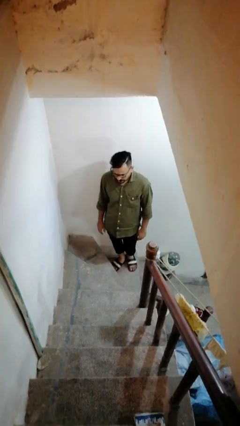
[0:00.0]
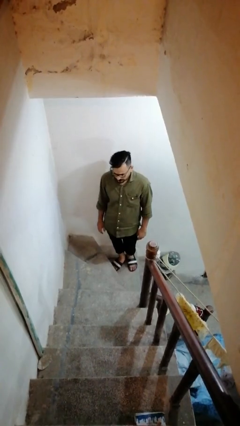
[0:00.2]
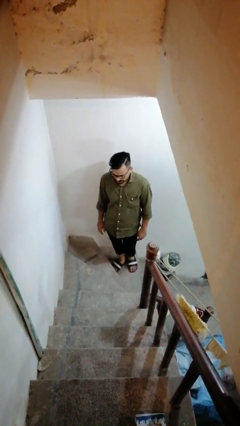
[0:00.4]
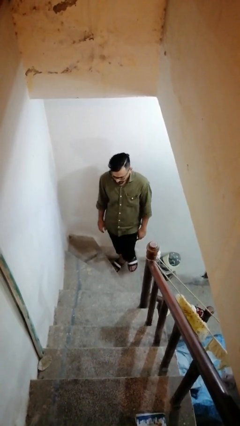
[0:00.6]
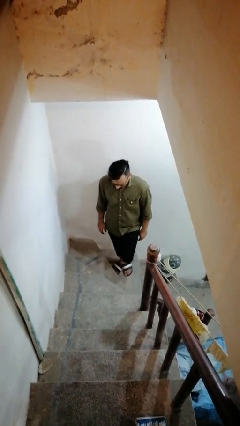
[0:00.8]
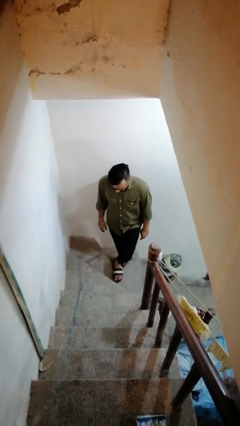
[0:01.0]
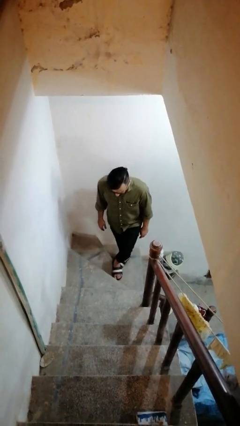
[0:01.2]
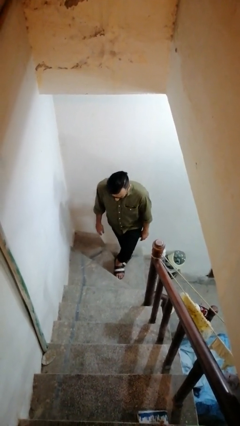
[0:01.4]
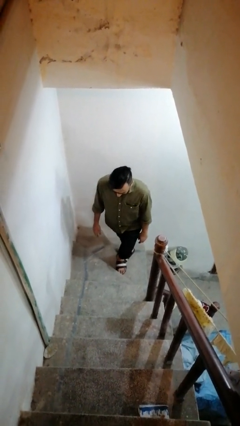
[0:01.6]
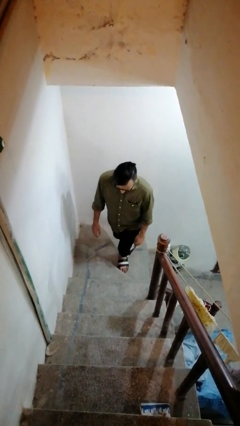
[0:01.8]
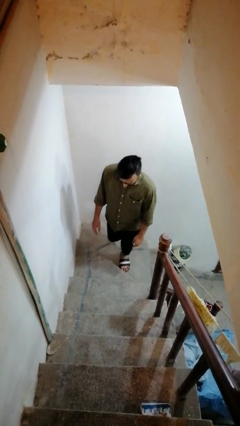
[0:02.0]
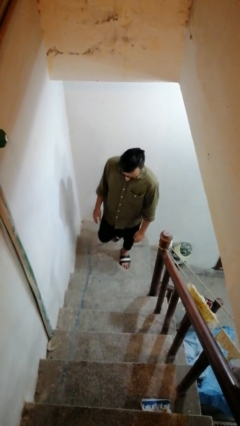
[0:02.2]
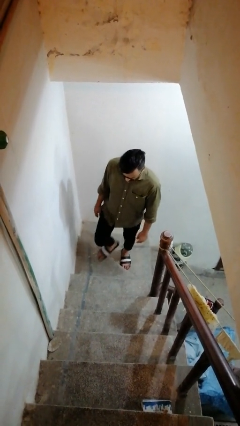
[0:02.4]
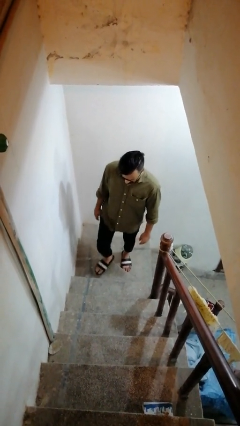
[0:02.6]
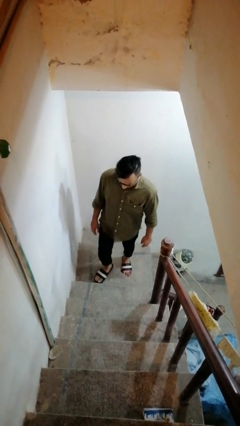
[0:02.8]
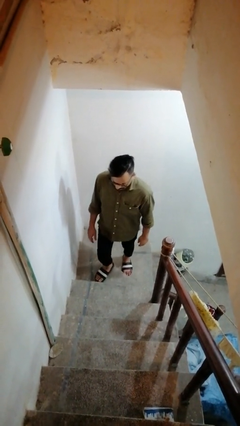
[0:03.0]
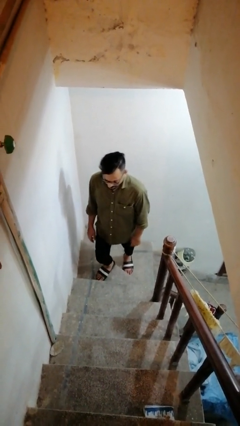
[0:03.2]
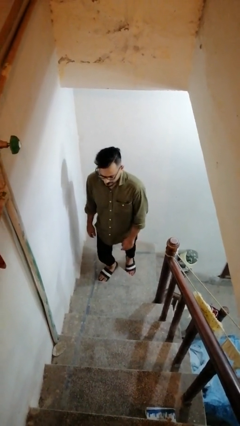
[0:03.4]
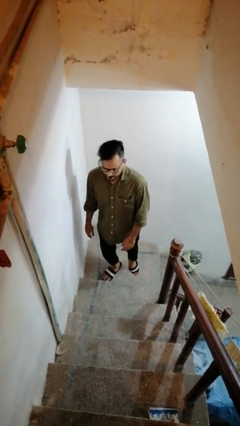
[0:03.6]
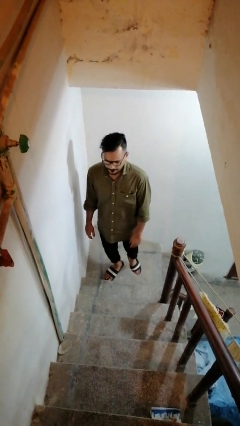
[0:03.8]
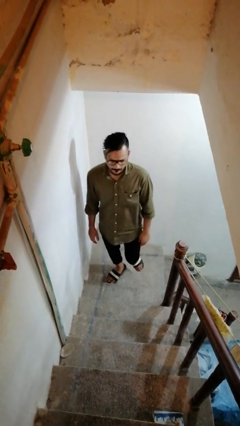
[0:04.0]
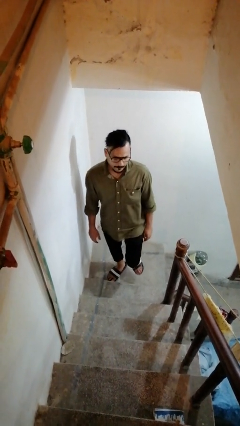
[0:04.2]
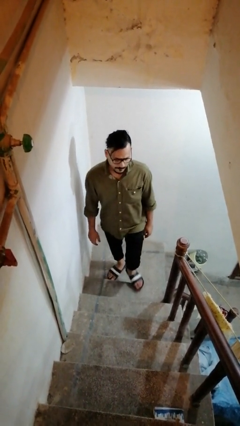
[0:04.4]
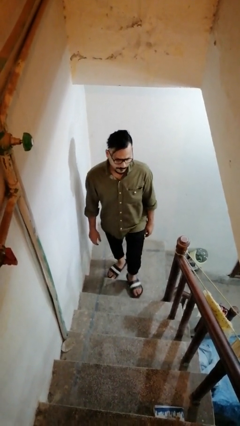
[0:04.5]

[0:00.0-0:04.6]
person climbs up stairs

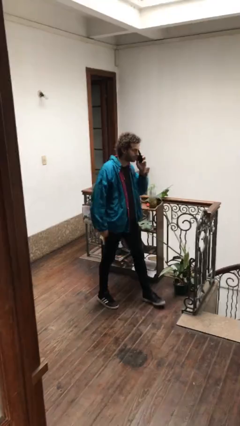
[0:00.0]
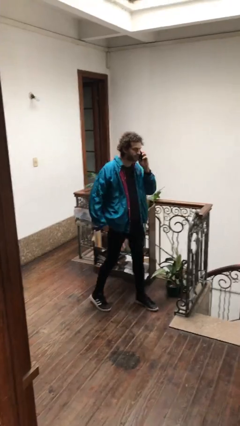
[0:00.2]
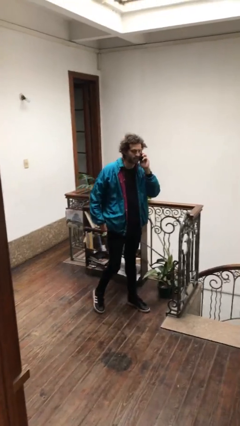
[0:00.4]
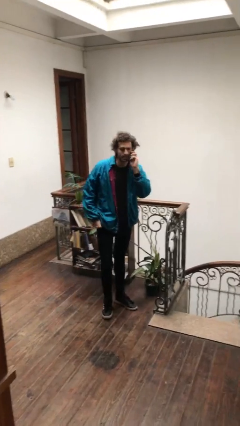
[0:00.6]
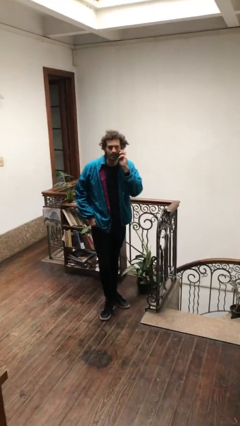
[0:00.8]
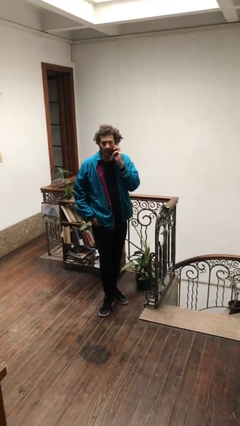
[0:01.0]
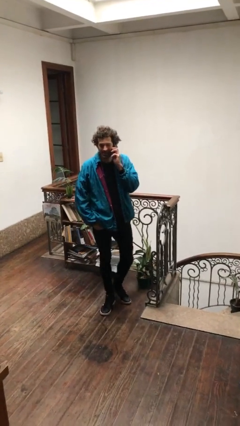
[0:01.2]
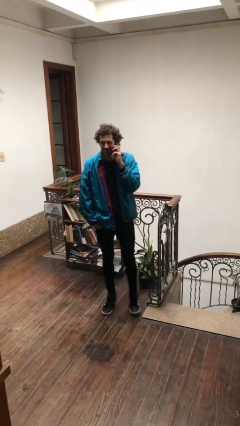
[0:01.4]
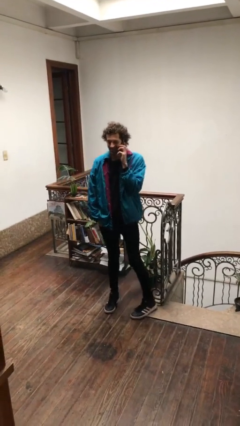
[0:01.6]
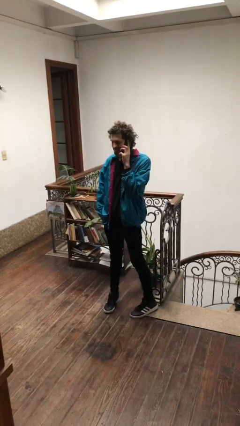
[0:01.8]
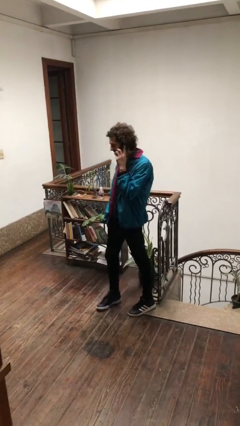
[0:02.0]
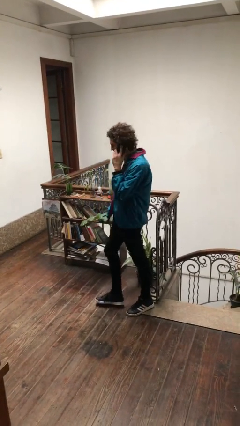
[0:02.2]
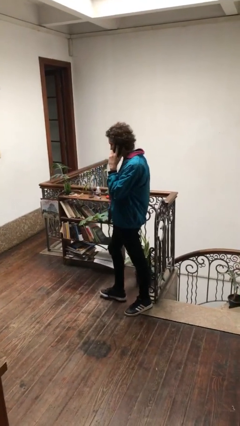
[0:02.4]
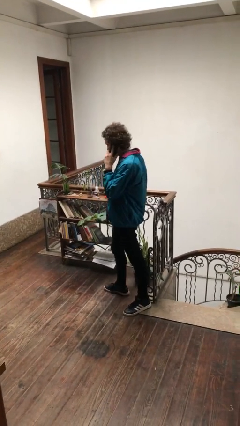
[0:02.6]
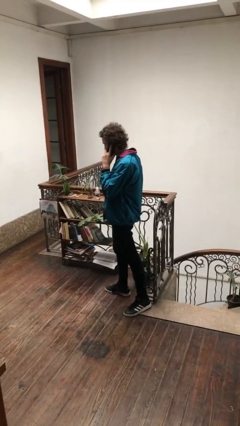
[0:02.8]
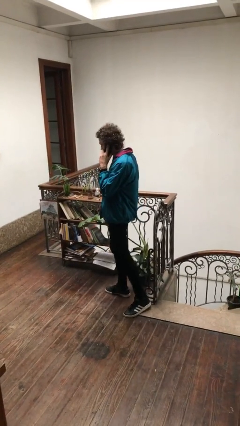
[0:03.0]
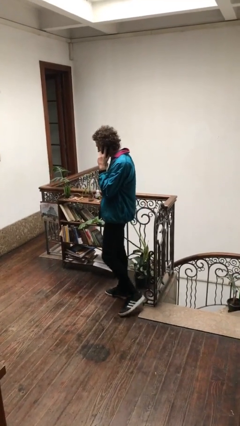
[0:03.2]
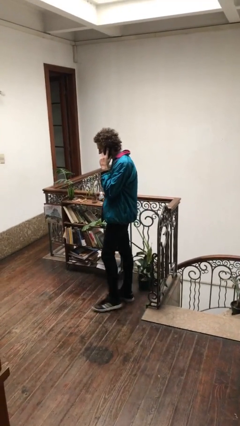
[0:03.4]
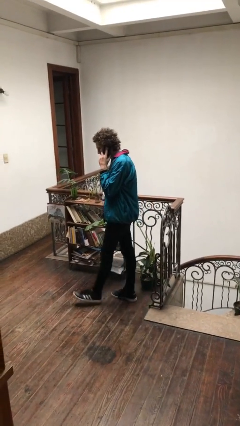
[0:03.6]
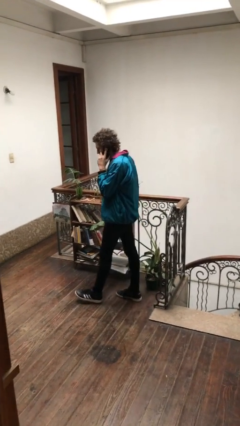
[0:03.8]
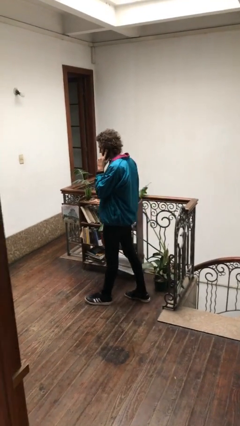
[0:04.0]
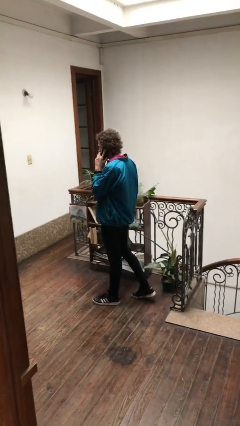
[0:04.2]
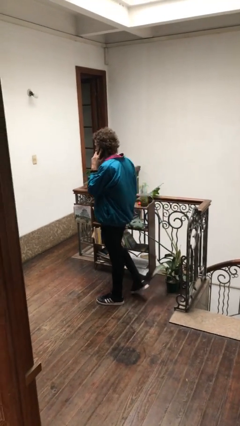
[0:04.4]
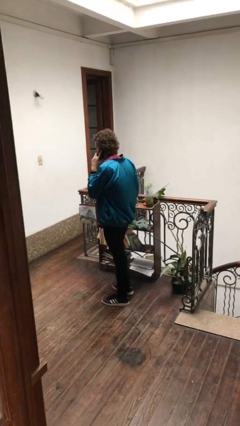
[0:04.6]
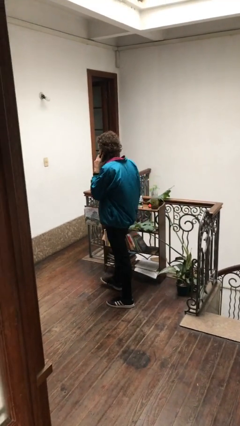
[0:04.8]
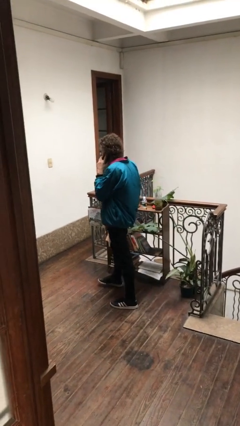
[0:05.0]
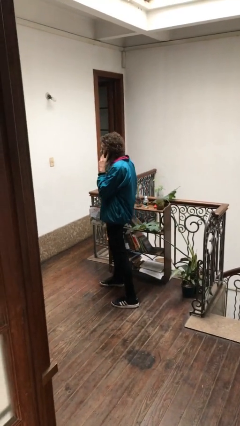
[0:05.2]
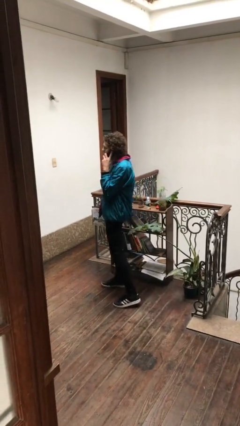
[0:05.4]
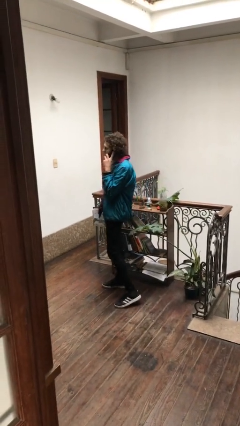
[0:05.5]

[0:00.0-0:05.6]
person talks on phone

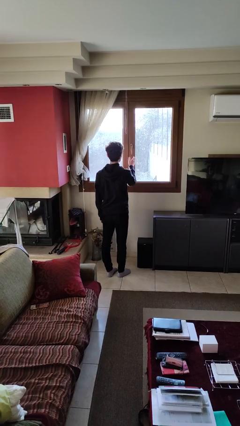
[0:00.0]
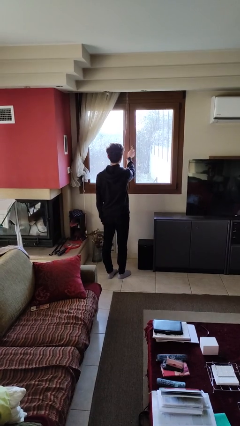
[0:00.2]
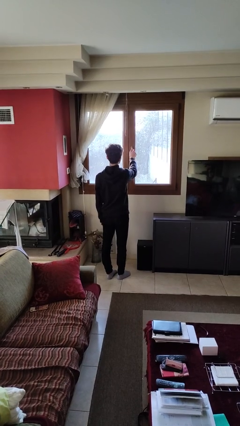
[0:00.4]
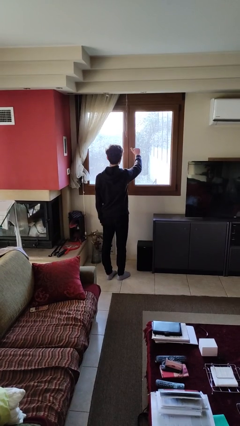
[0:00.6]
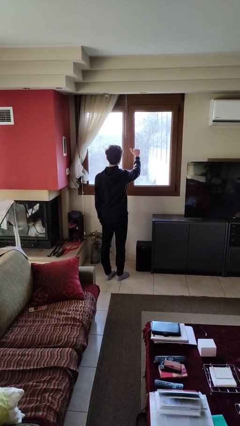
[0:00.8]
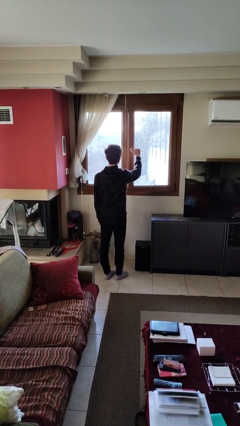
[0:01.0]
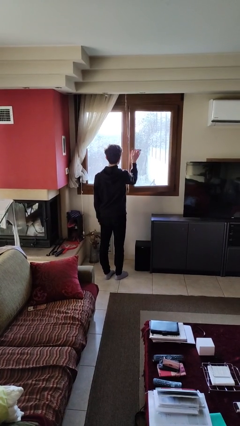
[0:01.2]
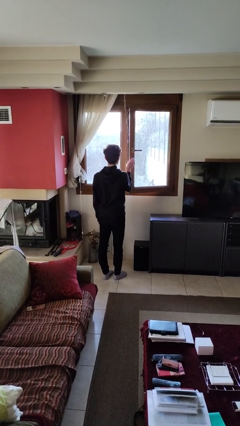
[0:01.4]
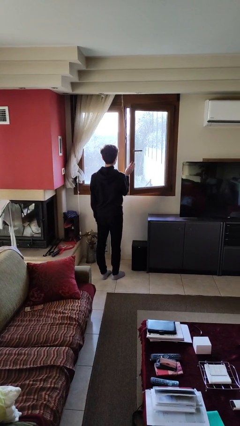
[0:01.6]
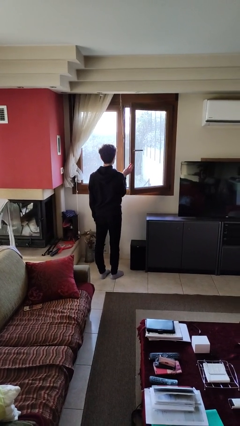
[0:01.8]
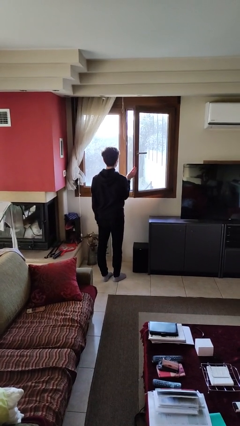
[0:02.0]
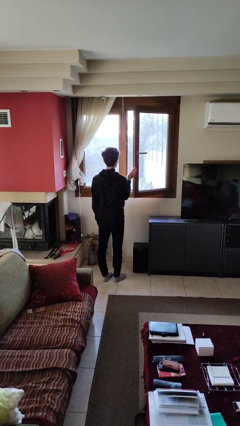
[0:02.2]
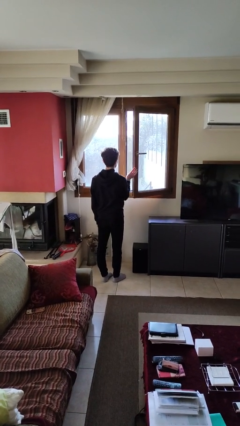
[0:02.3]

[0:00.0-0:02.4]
person opens home window

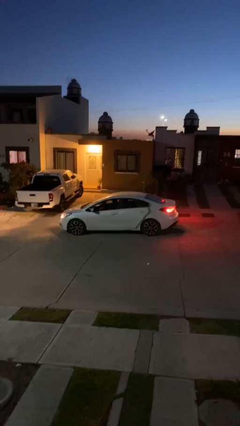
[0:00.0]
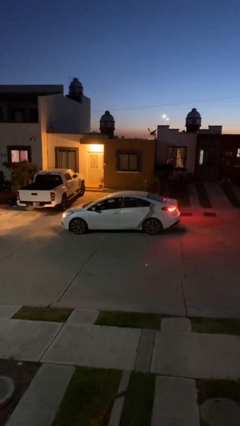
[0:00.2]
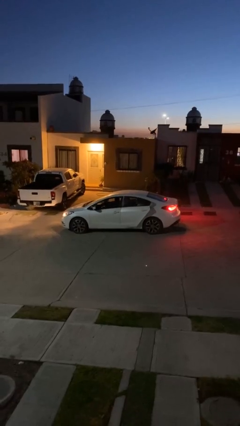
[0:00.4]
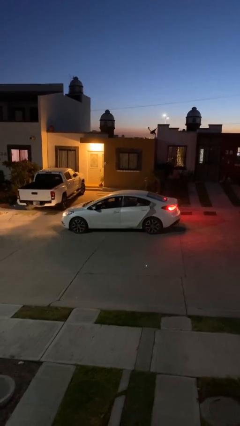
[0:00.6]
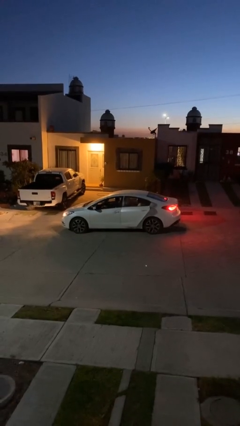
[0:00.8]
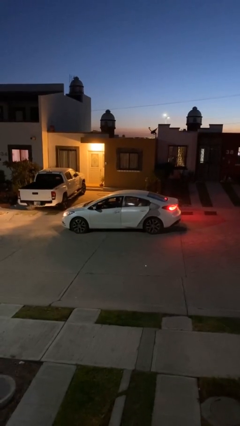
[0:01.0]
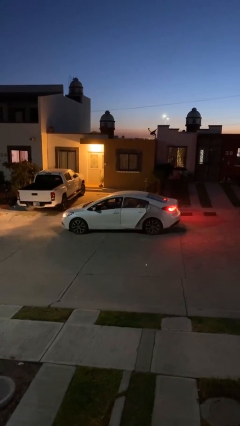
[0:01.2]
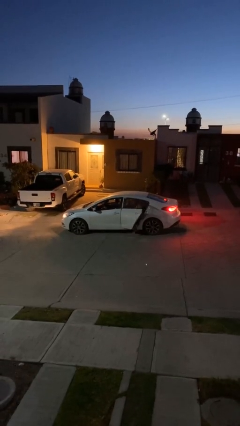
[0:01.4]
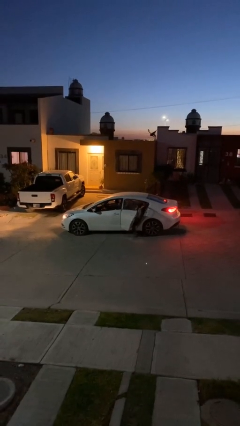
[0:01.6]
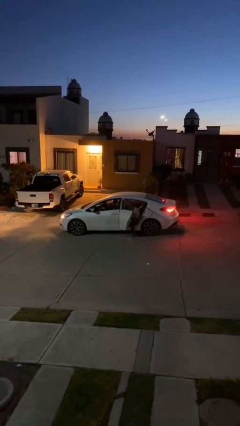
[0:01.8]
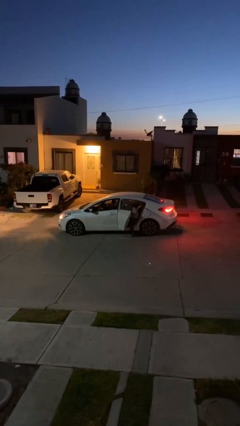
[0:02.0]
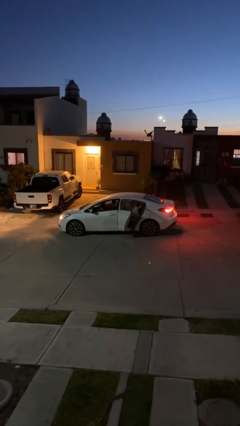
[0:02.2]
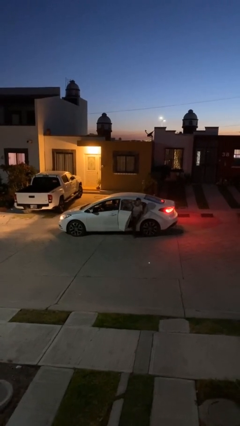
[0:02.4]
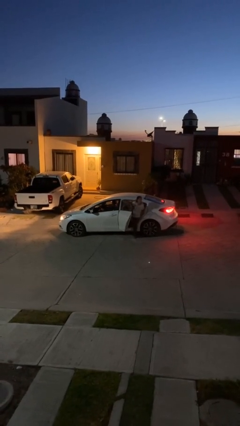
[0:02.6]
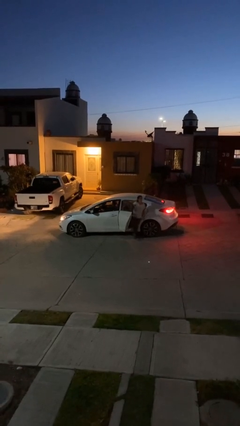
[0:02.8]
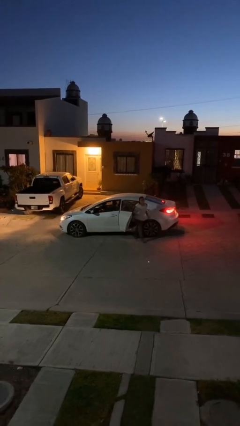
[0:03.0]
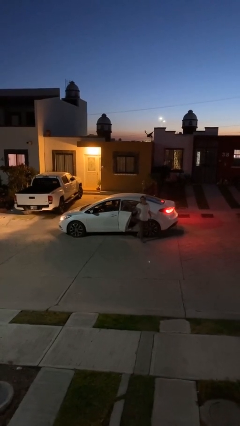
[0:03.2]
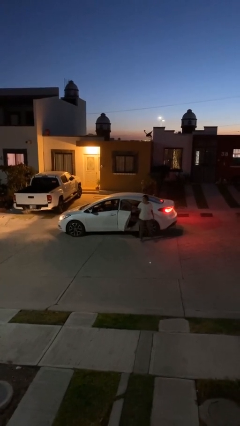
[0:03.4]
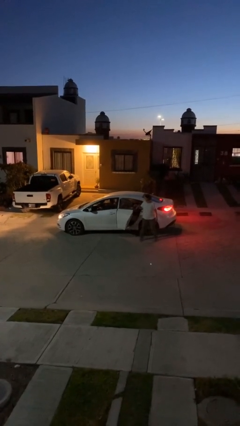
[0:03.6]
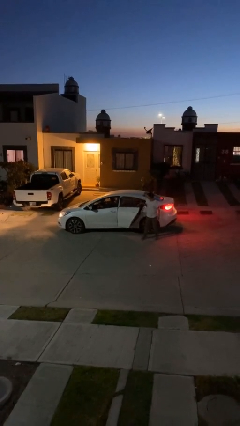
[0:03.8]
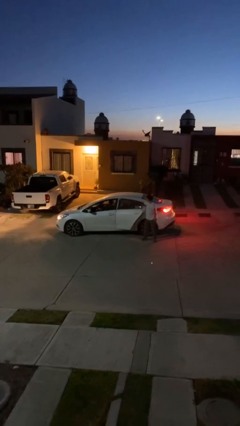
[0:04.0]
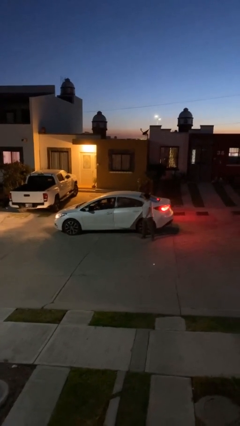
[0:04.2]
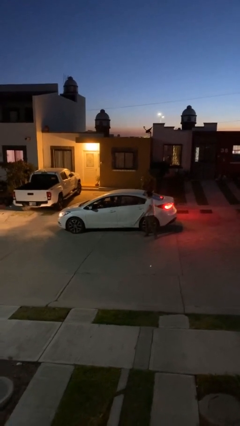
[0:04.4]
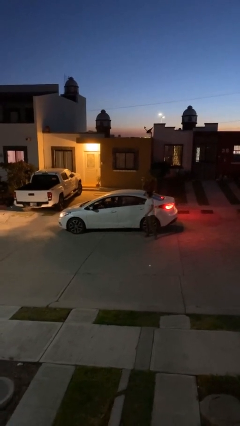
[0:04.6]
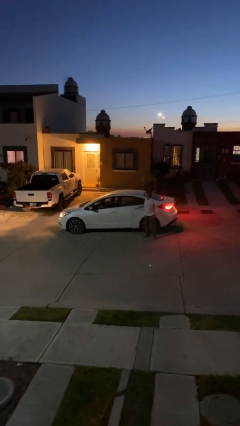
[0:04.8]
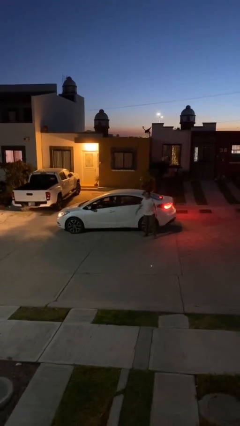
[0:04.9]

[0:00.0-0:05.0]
car drops off person

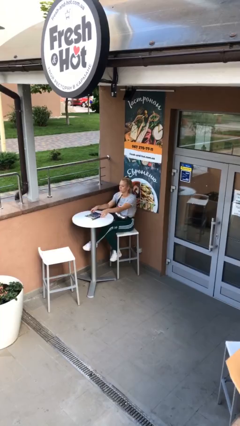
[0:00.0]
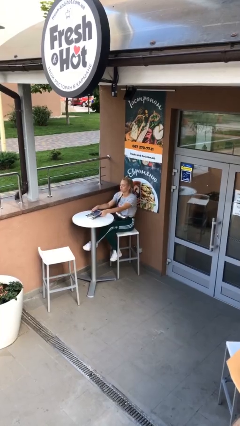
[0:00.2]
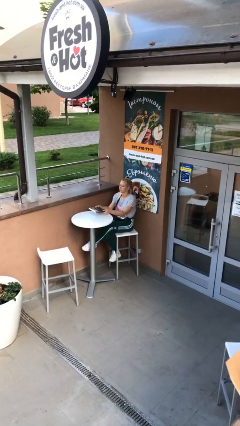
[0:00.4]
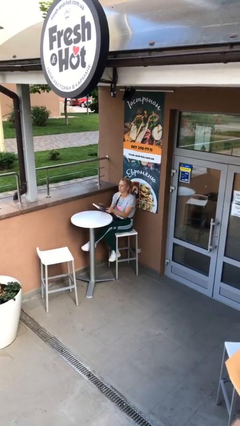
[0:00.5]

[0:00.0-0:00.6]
person picks up object from table
